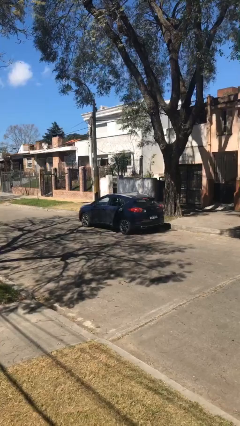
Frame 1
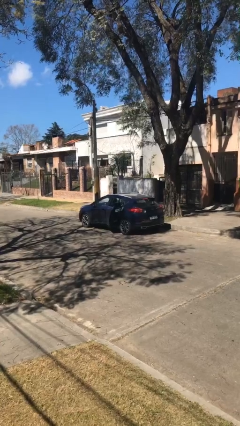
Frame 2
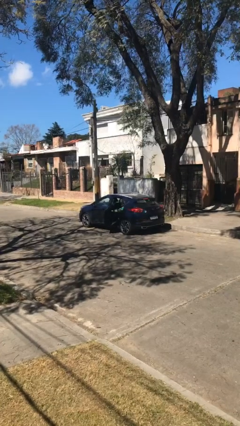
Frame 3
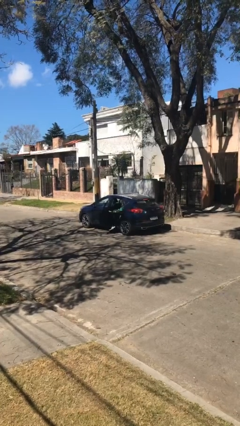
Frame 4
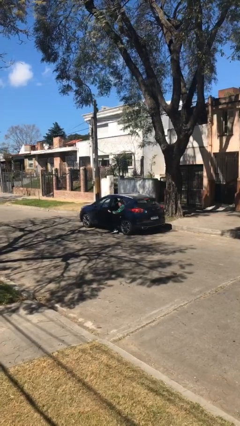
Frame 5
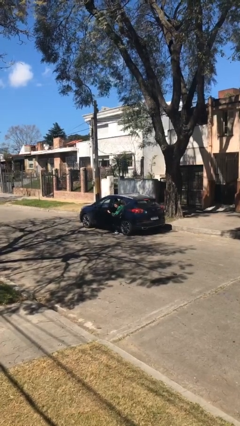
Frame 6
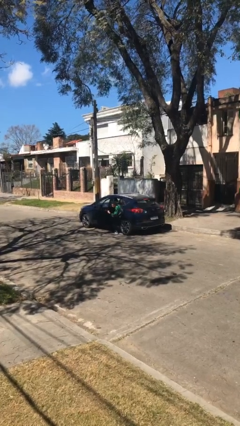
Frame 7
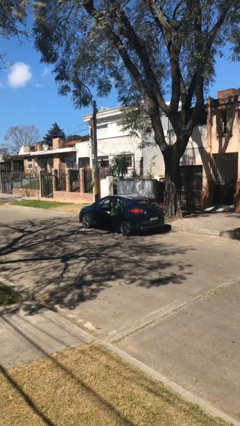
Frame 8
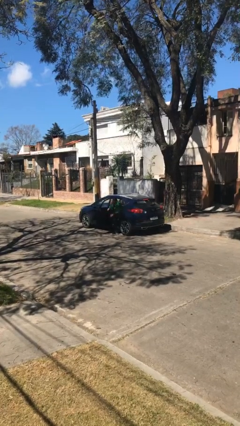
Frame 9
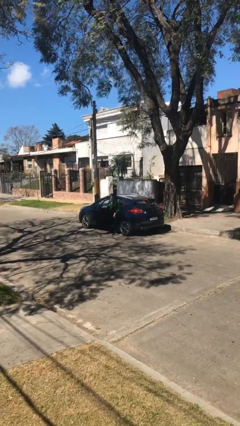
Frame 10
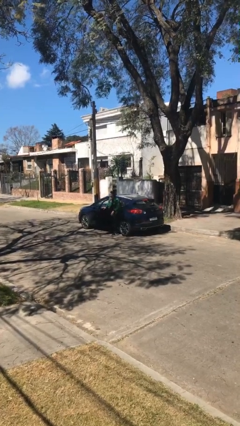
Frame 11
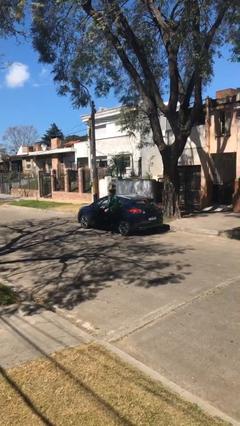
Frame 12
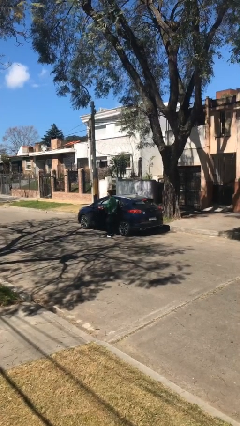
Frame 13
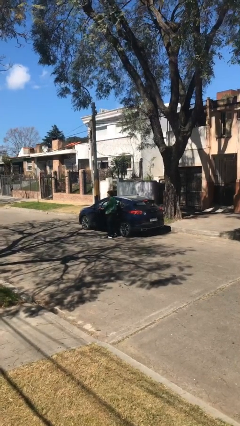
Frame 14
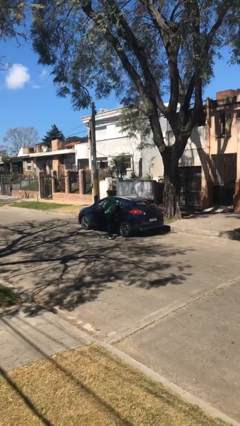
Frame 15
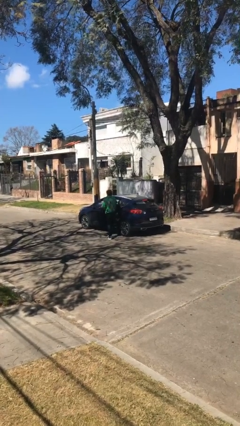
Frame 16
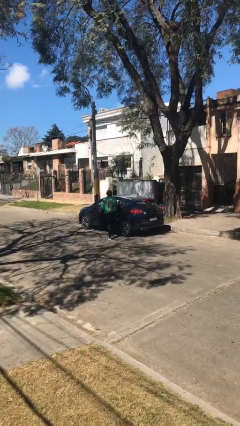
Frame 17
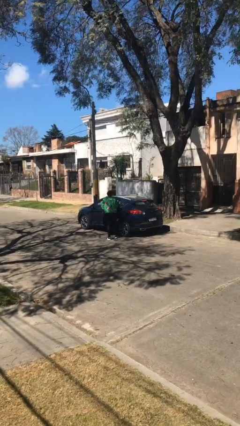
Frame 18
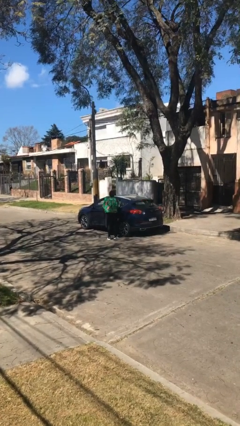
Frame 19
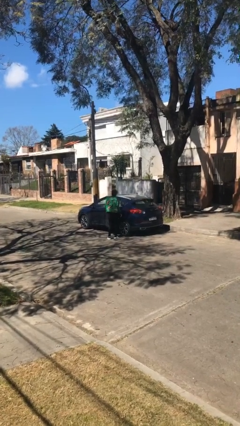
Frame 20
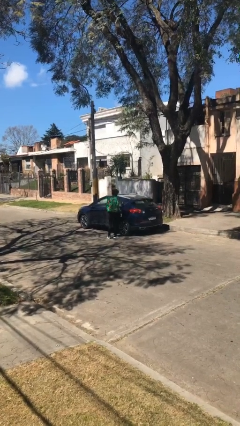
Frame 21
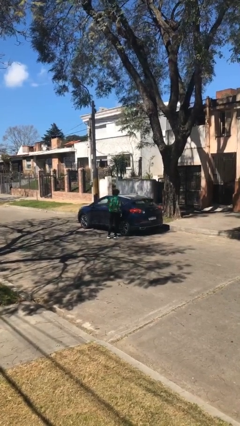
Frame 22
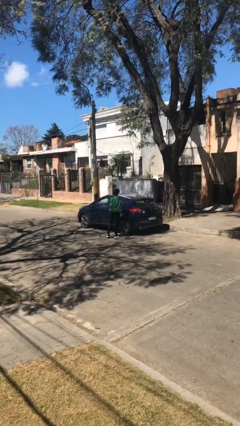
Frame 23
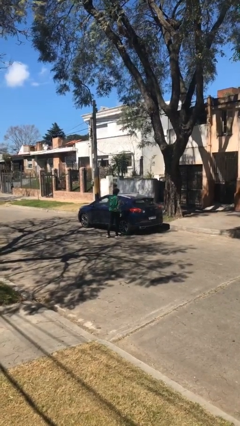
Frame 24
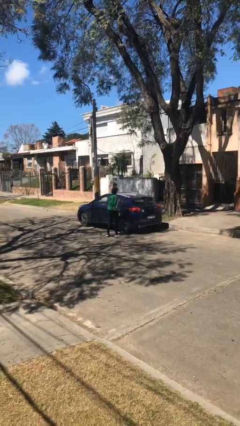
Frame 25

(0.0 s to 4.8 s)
car drops off person

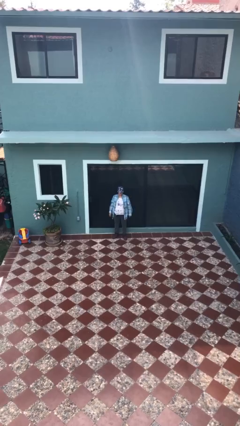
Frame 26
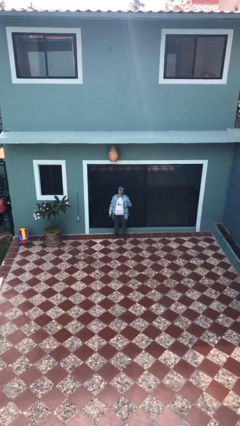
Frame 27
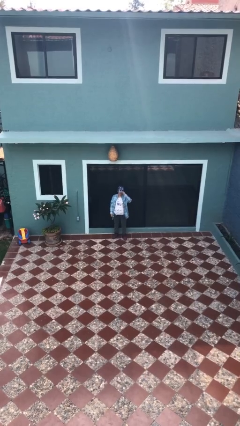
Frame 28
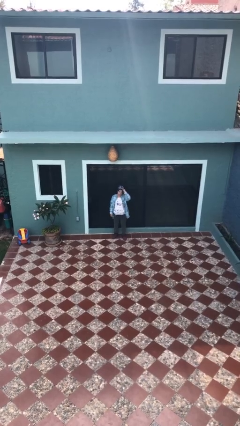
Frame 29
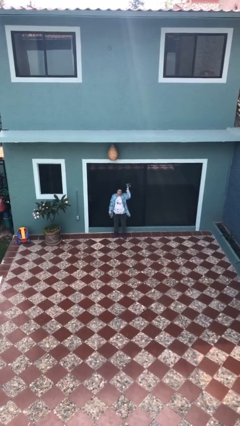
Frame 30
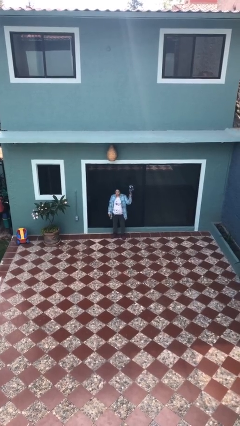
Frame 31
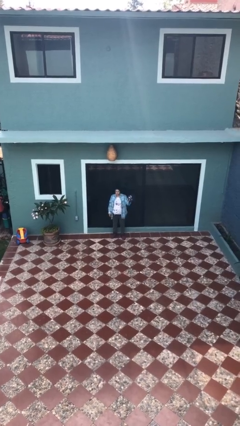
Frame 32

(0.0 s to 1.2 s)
person takes off hat

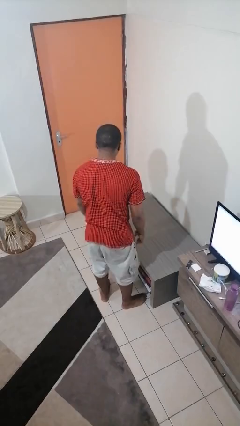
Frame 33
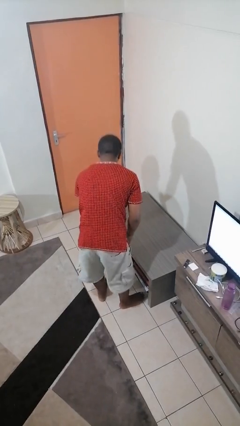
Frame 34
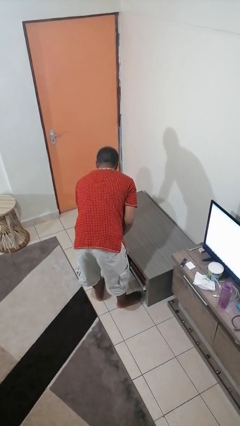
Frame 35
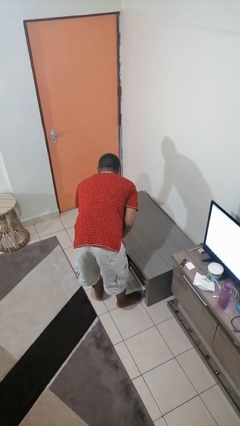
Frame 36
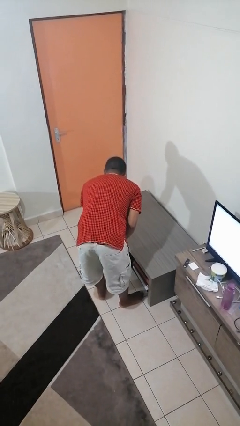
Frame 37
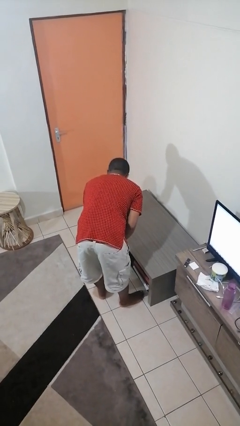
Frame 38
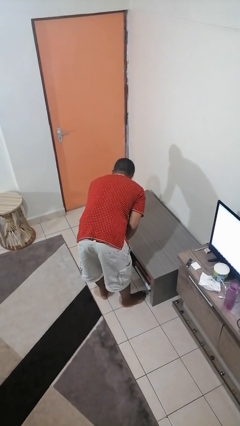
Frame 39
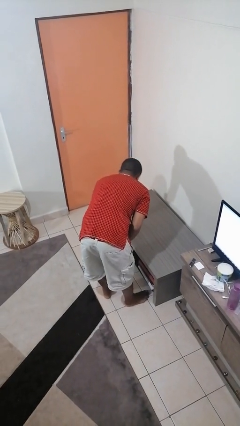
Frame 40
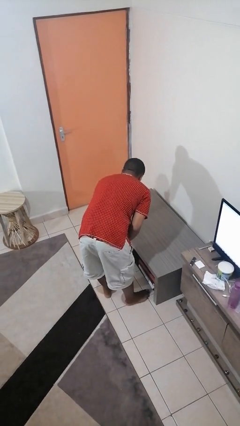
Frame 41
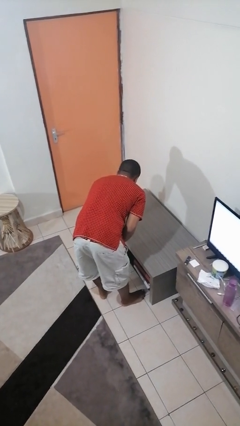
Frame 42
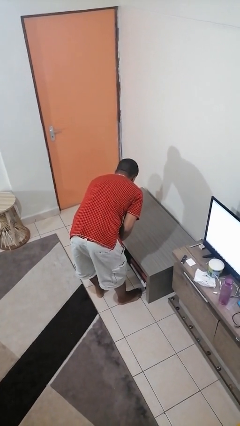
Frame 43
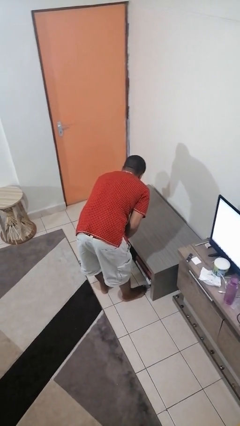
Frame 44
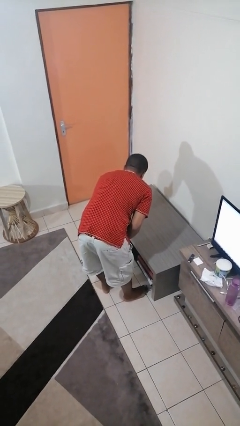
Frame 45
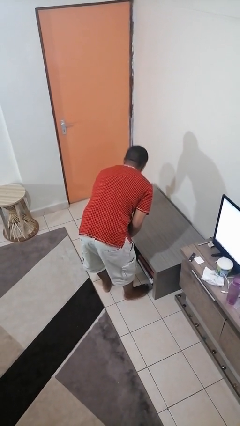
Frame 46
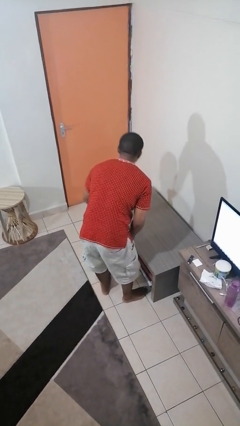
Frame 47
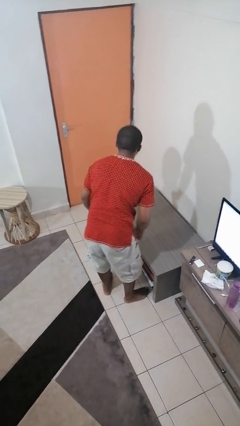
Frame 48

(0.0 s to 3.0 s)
person sprays from bottle

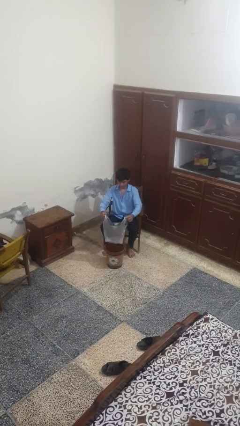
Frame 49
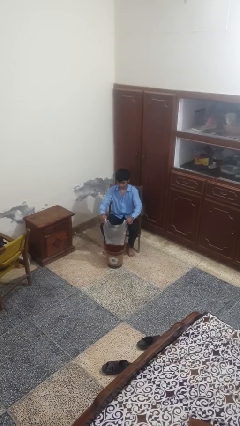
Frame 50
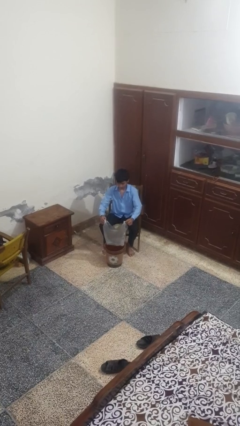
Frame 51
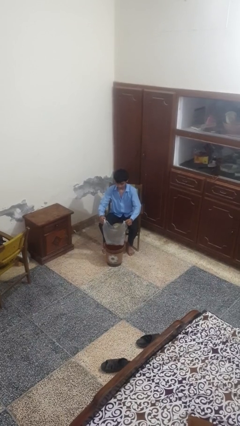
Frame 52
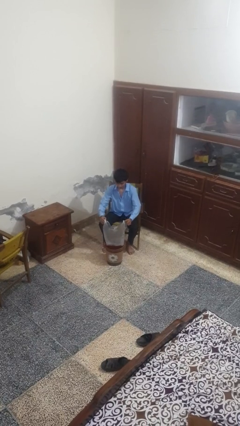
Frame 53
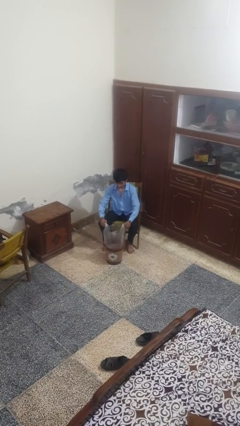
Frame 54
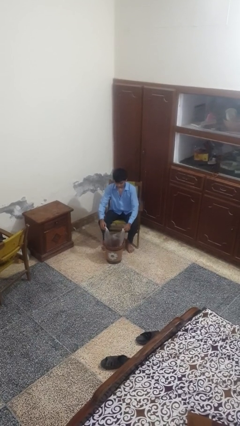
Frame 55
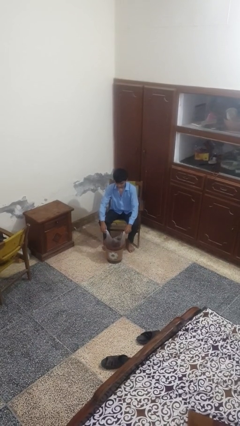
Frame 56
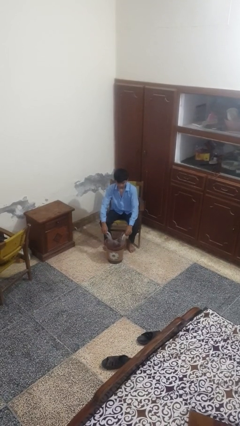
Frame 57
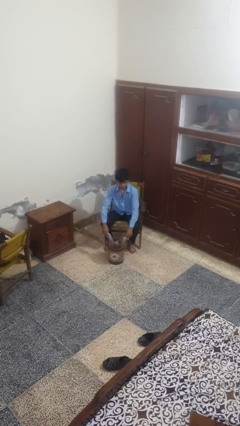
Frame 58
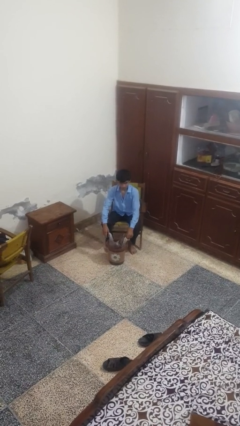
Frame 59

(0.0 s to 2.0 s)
person inserts trashbag into trashcan

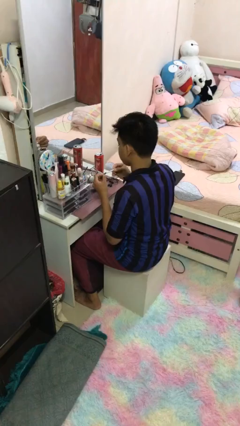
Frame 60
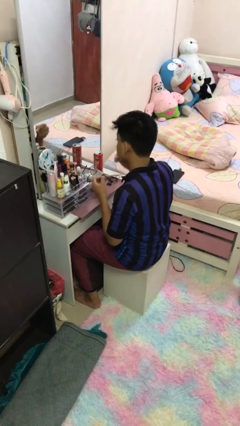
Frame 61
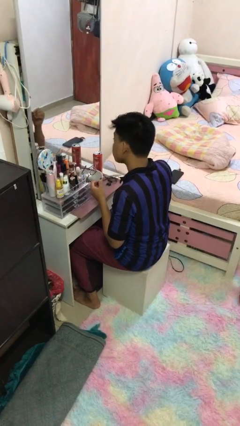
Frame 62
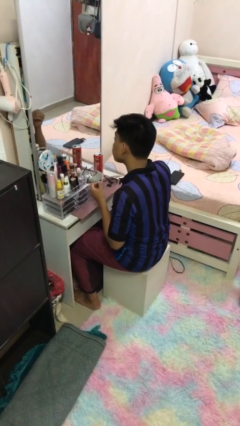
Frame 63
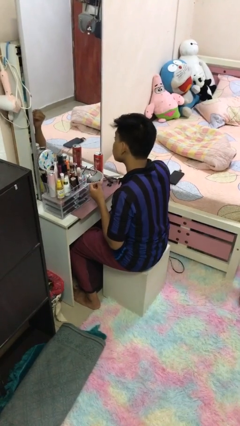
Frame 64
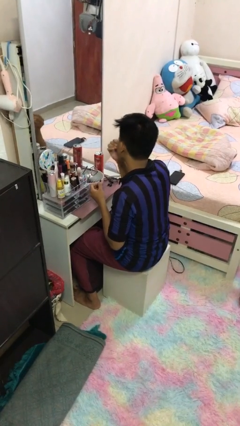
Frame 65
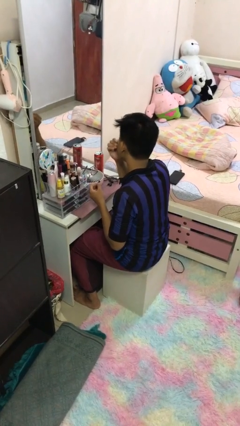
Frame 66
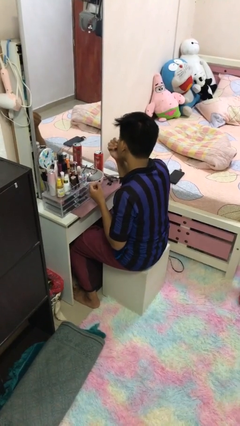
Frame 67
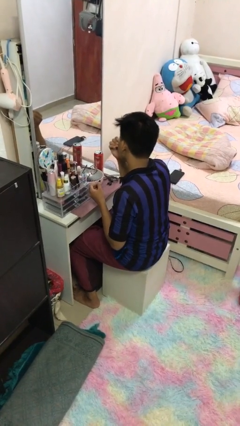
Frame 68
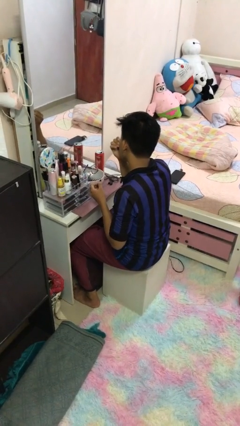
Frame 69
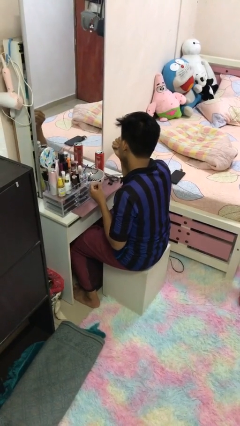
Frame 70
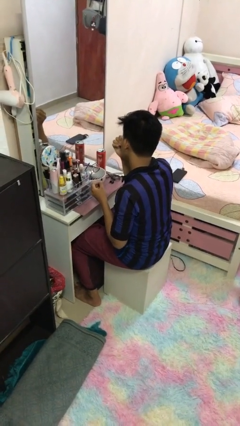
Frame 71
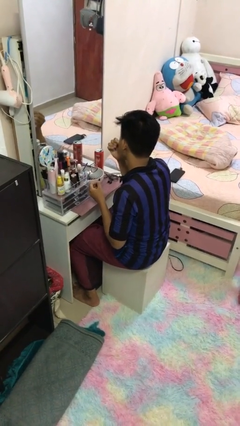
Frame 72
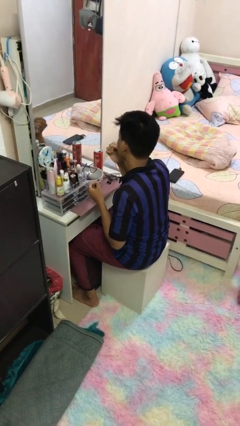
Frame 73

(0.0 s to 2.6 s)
person applies eye makeup

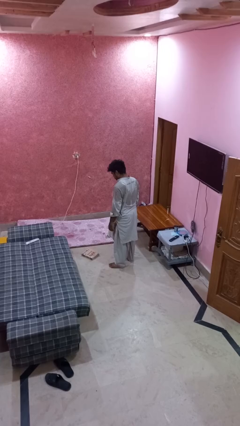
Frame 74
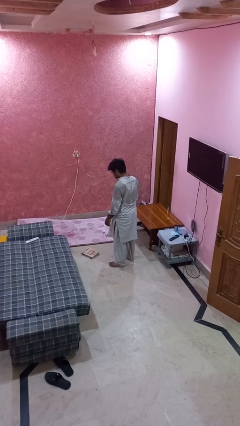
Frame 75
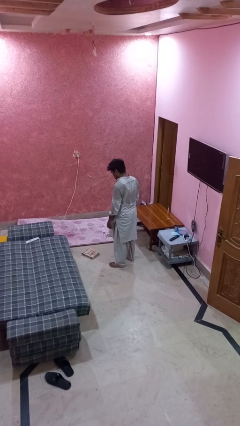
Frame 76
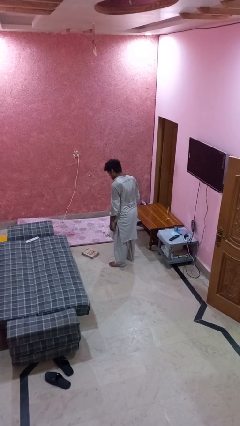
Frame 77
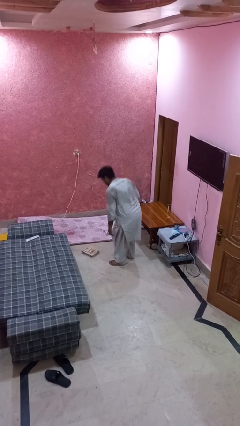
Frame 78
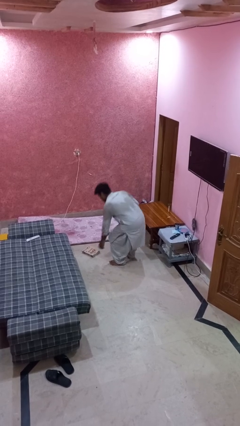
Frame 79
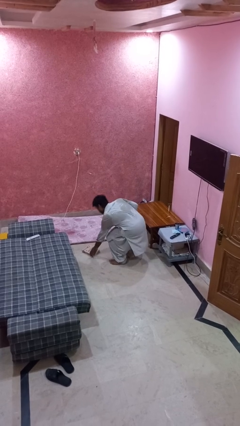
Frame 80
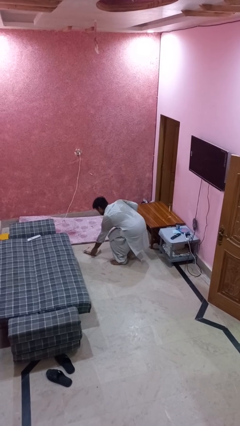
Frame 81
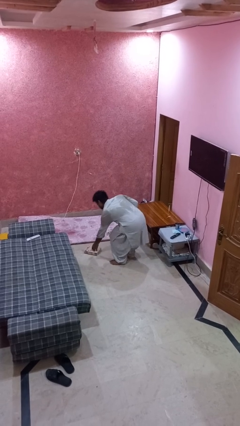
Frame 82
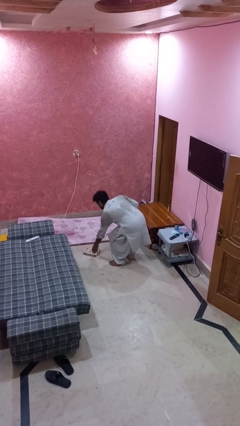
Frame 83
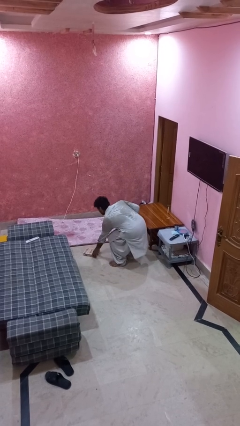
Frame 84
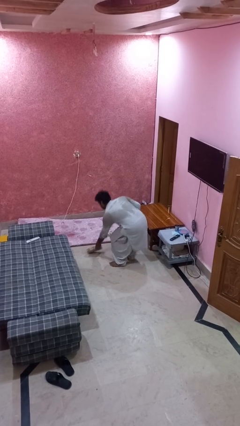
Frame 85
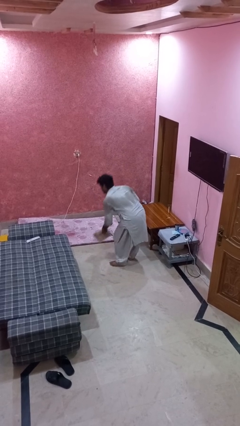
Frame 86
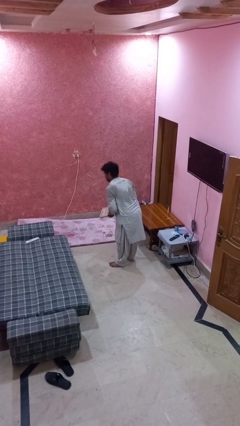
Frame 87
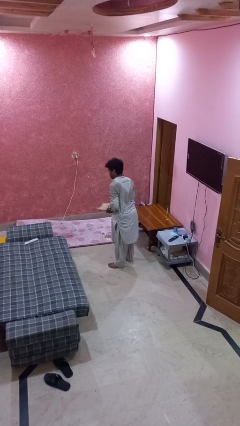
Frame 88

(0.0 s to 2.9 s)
person picks up object from floor

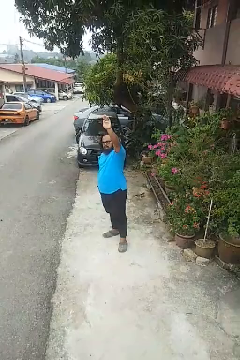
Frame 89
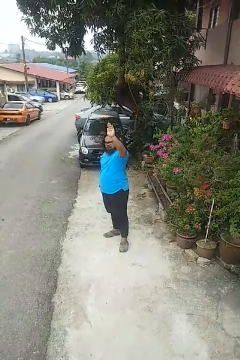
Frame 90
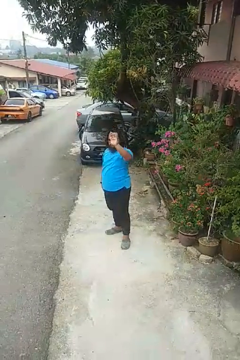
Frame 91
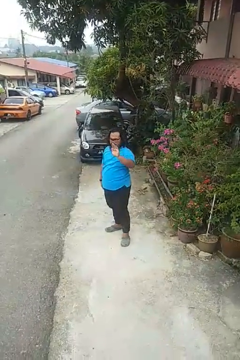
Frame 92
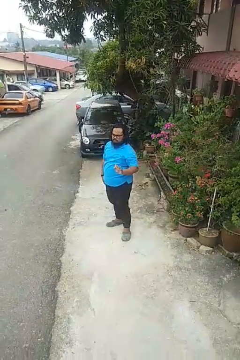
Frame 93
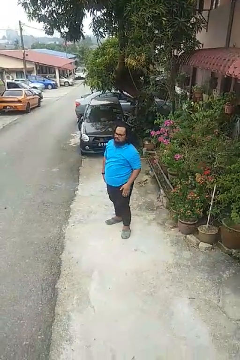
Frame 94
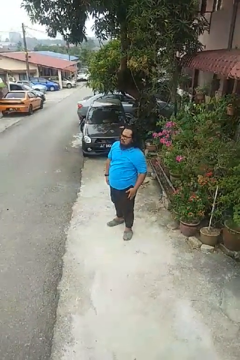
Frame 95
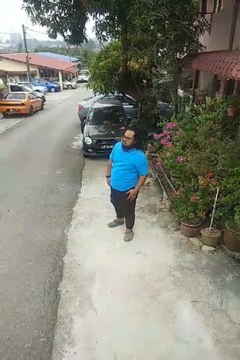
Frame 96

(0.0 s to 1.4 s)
person gestures lower hand
